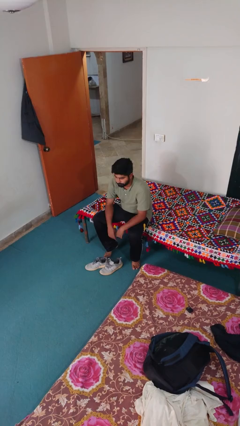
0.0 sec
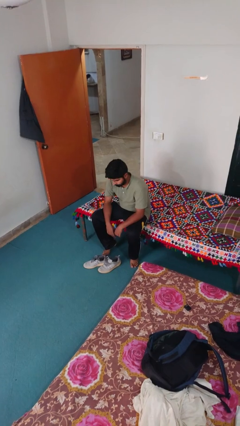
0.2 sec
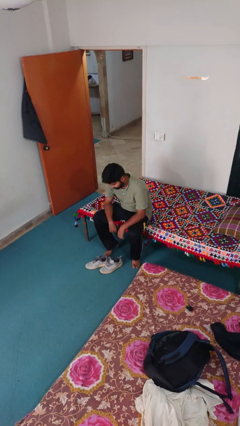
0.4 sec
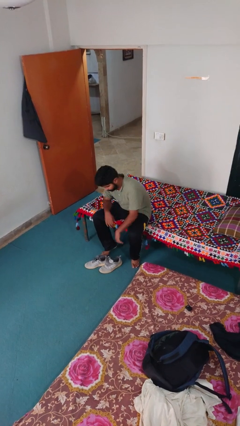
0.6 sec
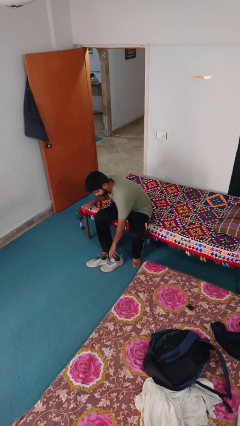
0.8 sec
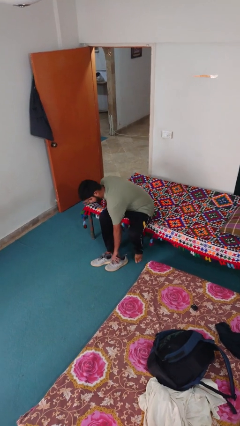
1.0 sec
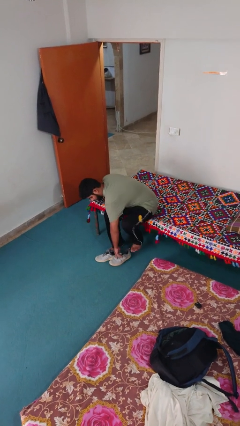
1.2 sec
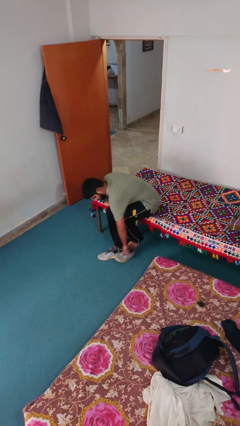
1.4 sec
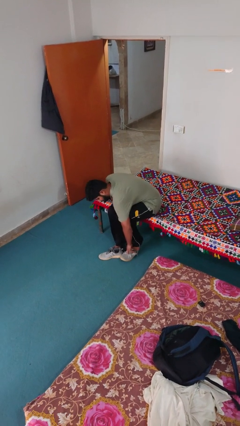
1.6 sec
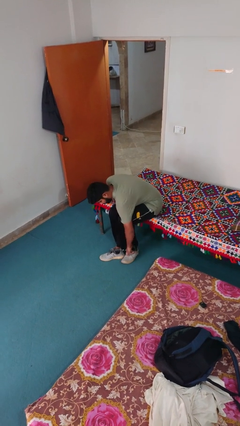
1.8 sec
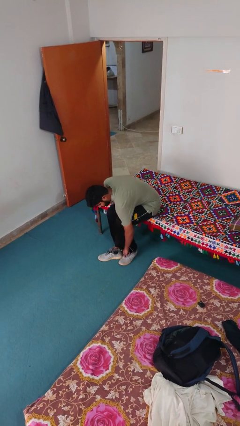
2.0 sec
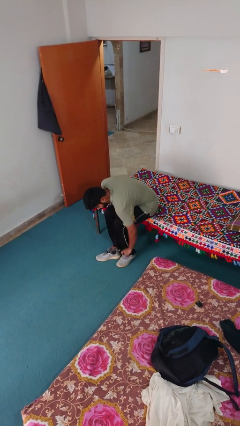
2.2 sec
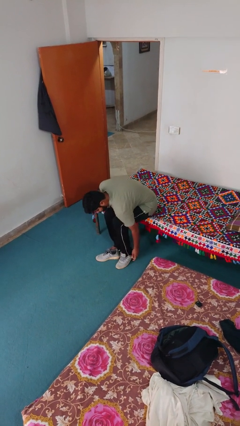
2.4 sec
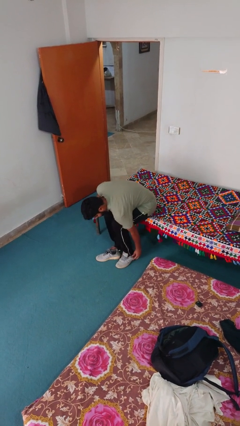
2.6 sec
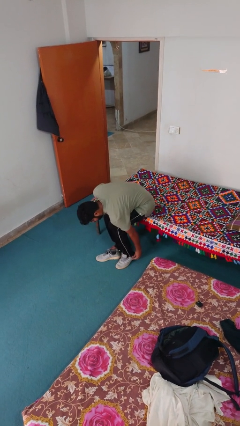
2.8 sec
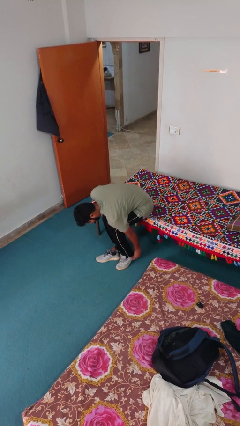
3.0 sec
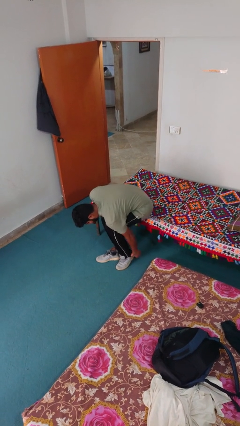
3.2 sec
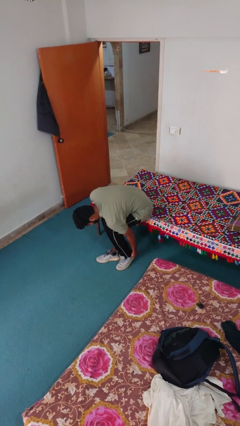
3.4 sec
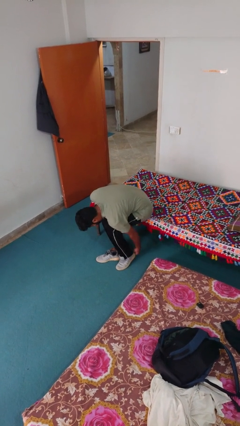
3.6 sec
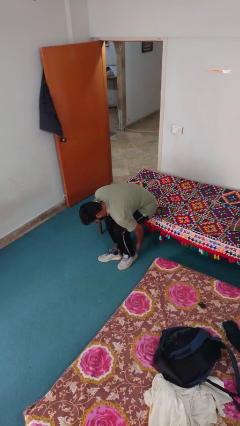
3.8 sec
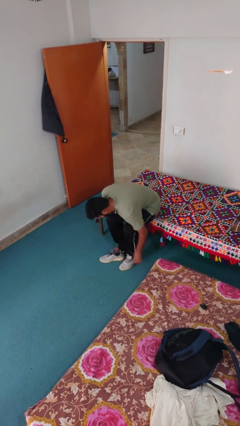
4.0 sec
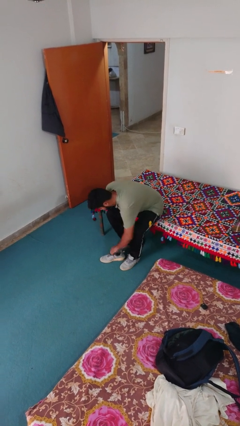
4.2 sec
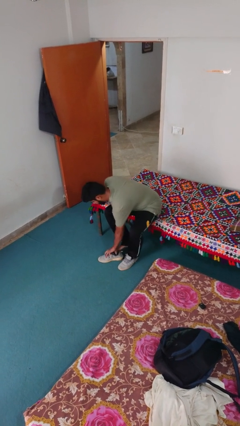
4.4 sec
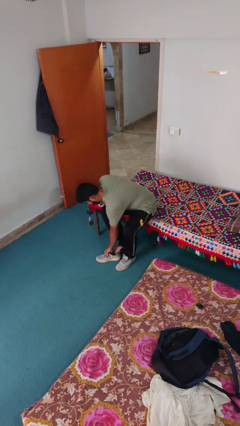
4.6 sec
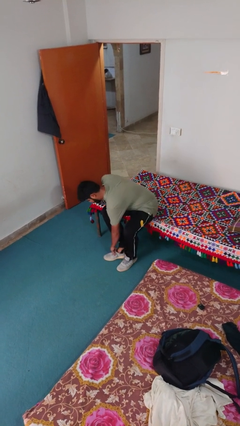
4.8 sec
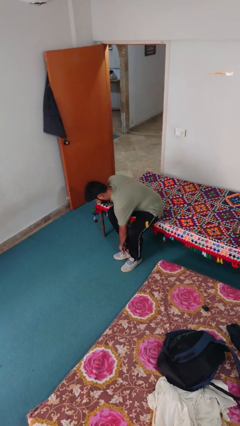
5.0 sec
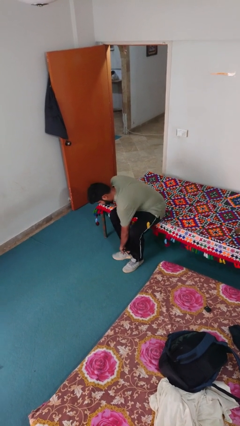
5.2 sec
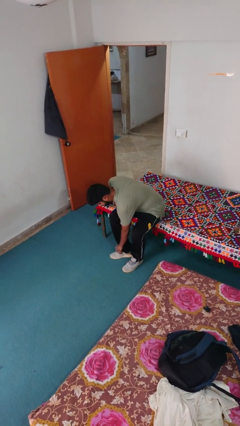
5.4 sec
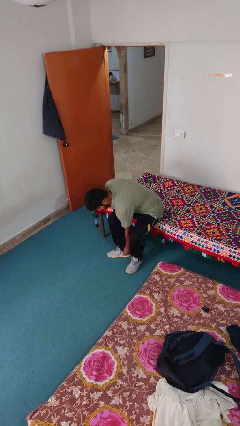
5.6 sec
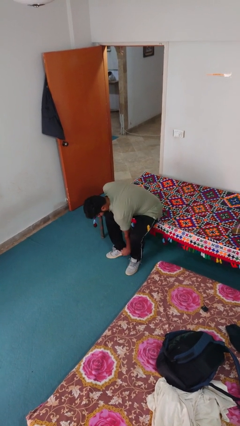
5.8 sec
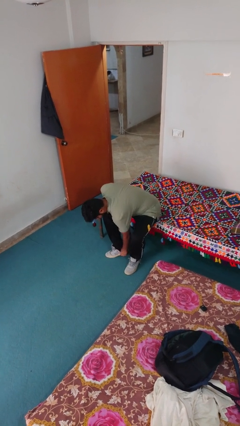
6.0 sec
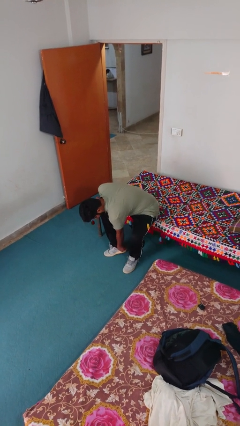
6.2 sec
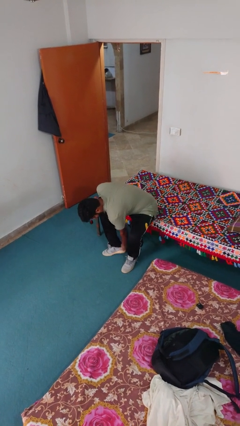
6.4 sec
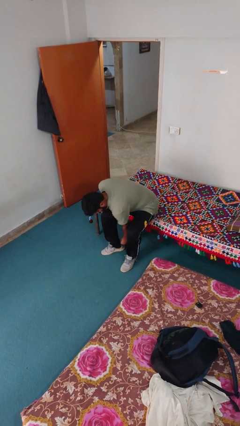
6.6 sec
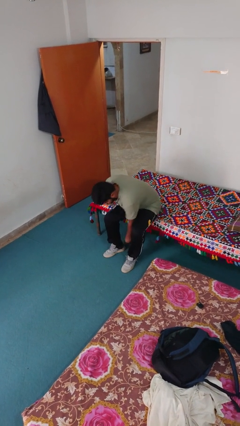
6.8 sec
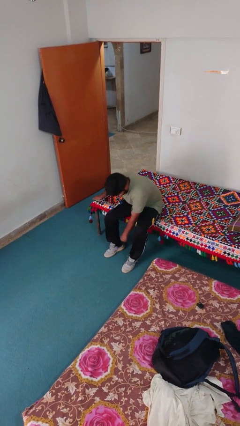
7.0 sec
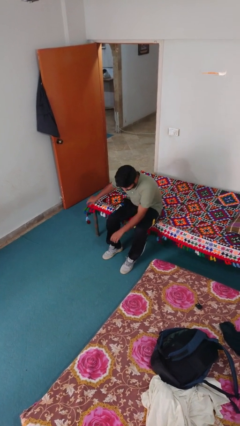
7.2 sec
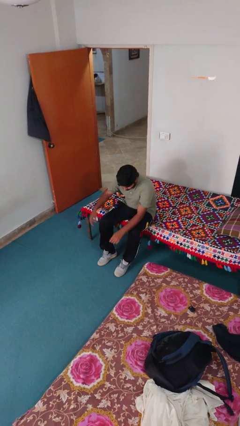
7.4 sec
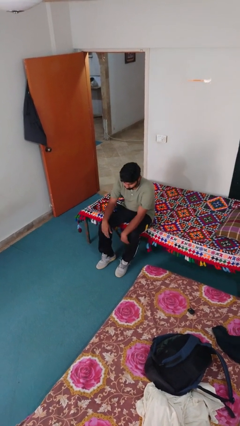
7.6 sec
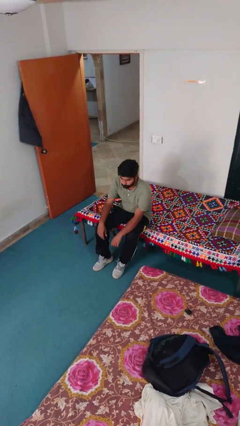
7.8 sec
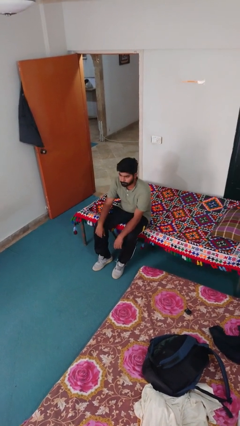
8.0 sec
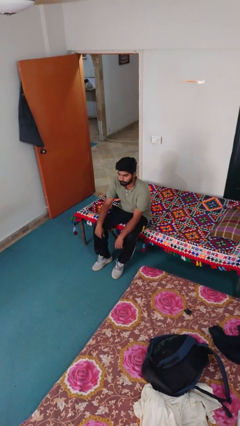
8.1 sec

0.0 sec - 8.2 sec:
person puts on shoes

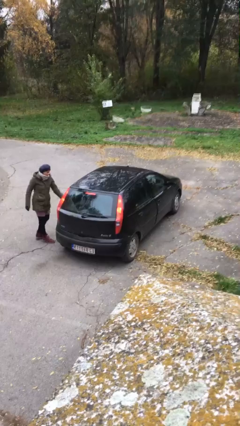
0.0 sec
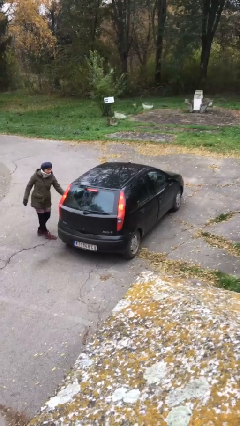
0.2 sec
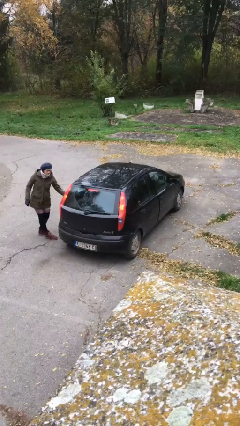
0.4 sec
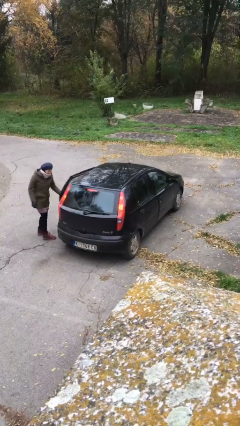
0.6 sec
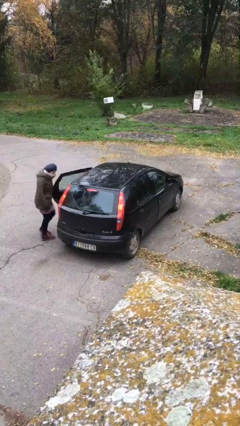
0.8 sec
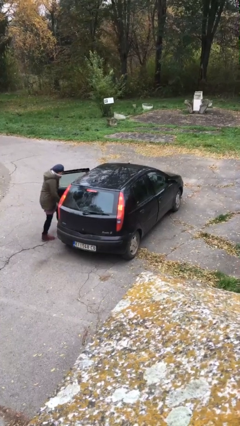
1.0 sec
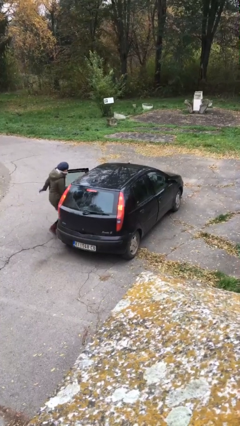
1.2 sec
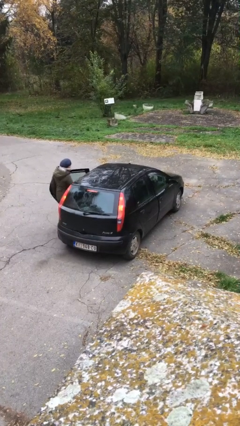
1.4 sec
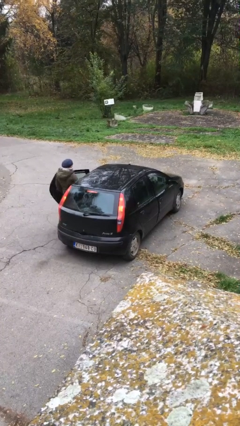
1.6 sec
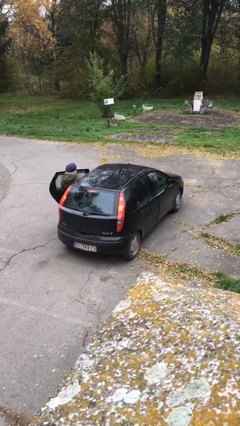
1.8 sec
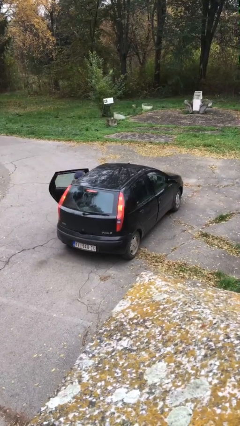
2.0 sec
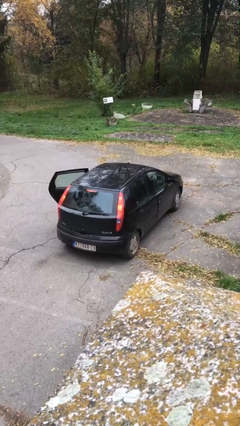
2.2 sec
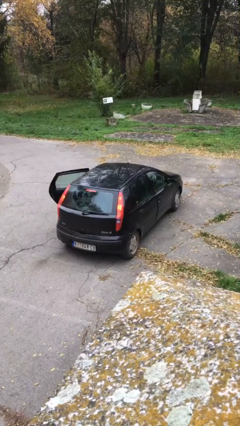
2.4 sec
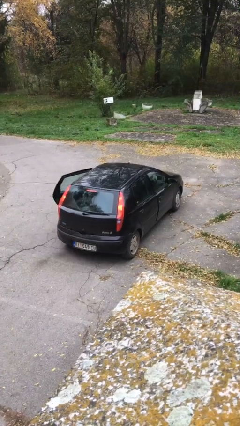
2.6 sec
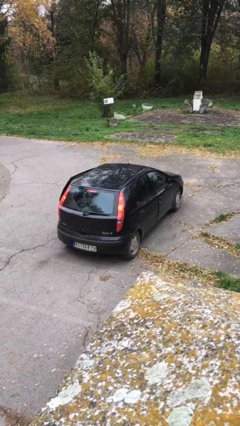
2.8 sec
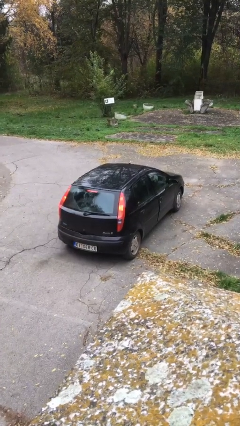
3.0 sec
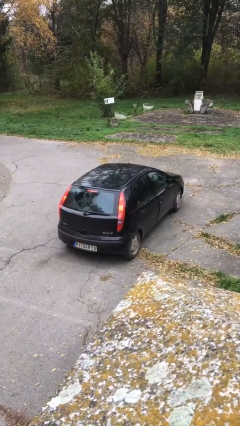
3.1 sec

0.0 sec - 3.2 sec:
car picks up person

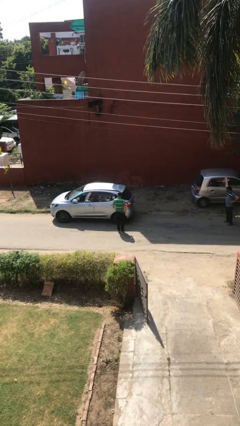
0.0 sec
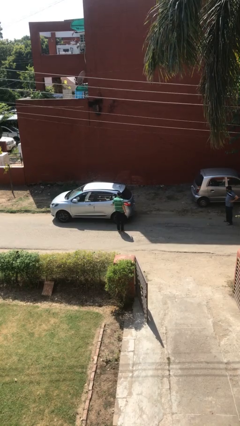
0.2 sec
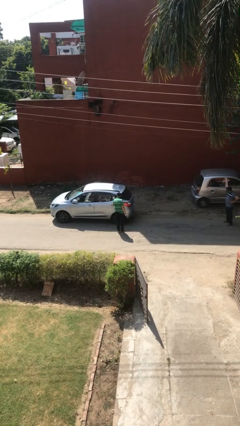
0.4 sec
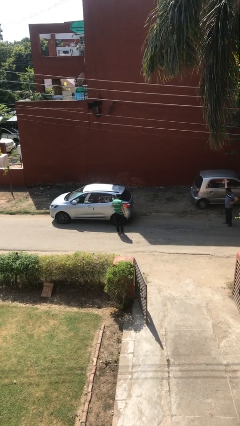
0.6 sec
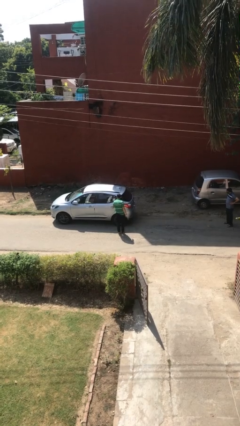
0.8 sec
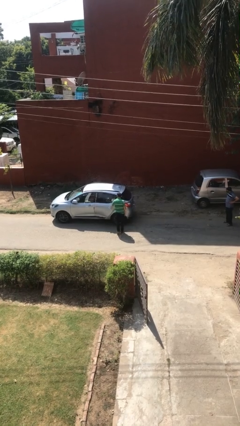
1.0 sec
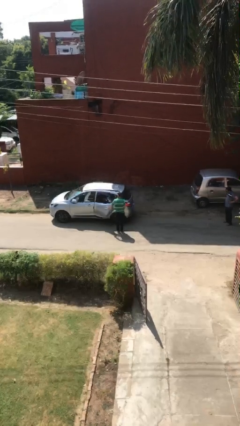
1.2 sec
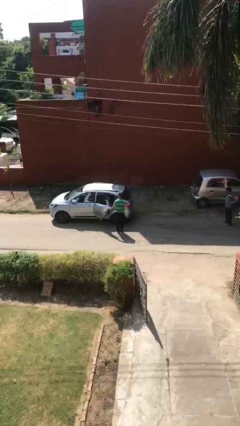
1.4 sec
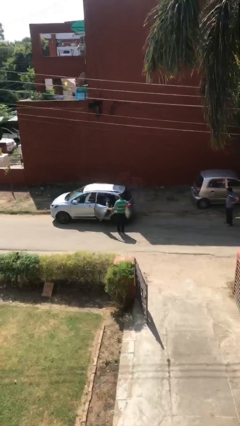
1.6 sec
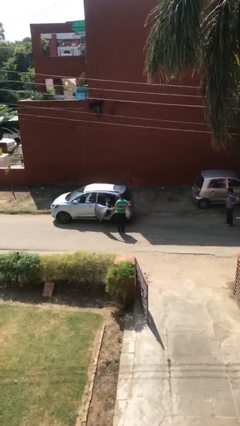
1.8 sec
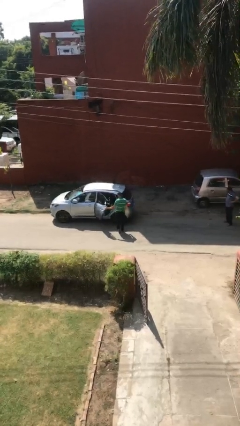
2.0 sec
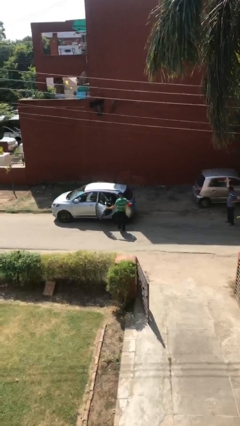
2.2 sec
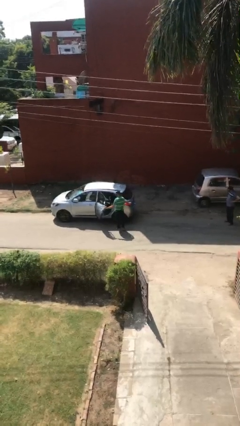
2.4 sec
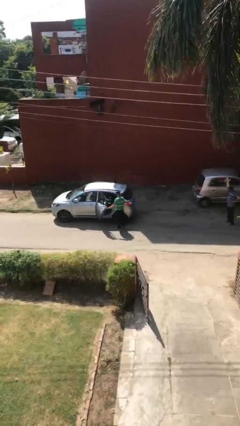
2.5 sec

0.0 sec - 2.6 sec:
person opens car door

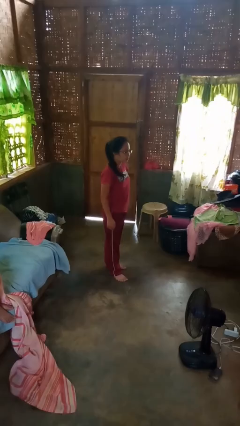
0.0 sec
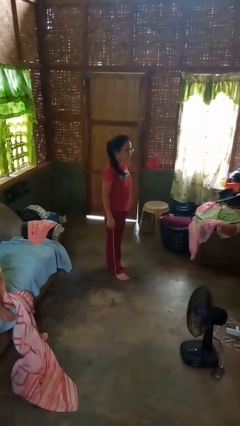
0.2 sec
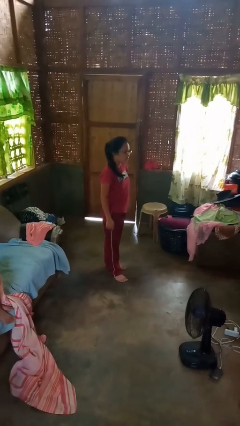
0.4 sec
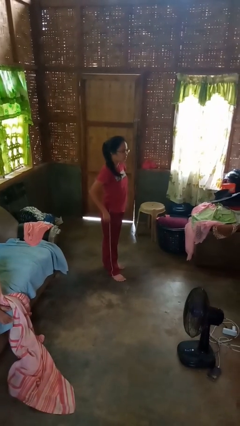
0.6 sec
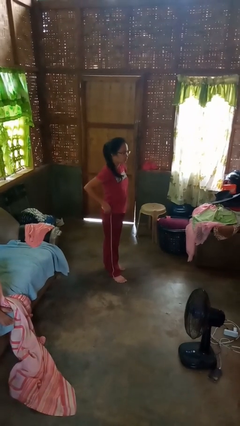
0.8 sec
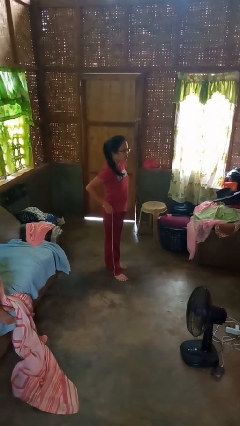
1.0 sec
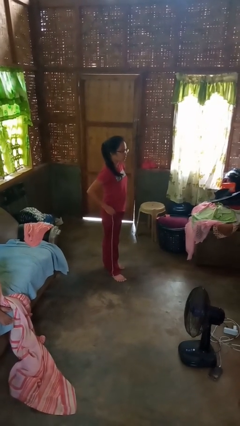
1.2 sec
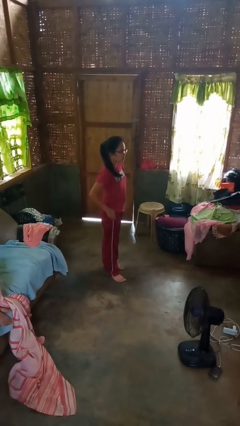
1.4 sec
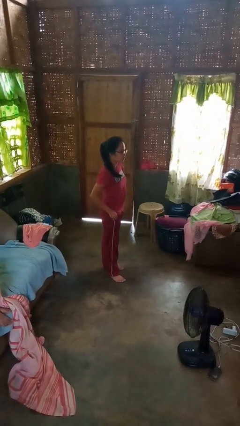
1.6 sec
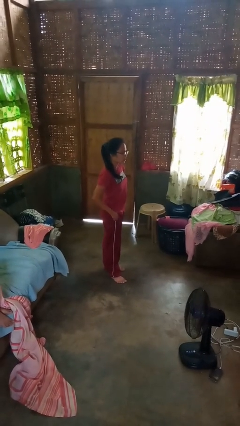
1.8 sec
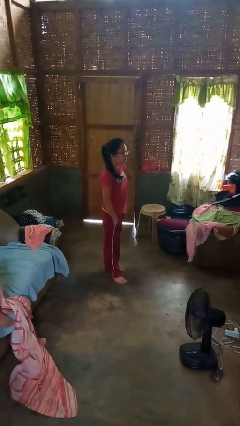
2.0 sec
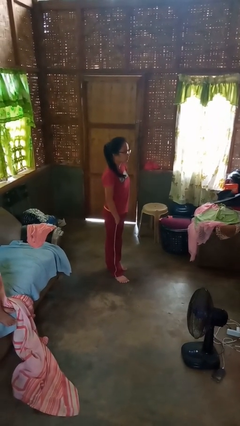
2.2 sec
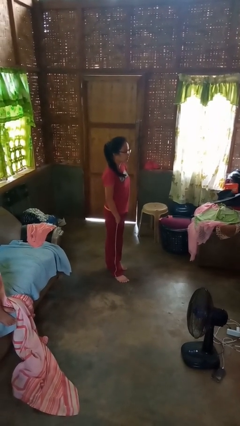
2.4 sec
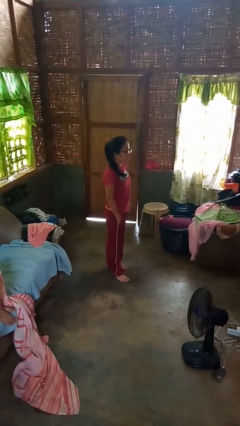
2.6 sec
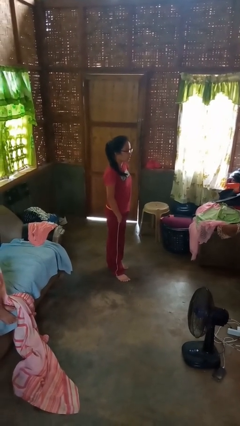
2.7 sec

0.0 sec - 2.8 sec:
person puts hands in back pockets

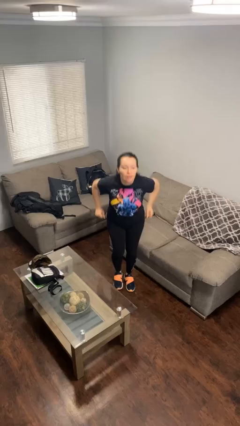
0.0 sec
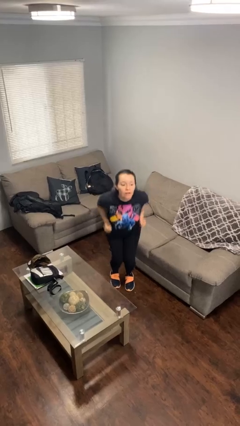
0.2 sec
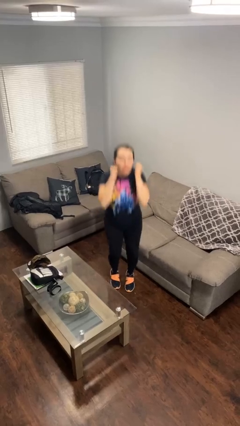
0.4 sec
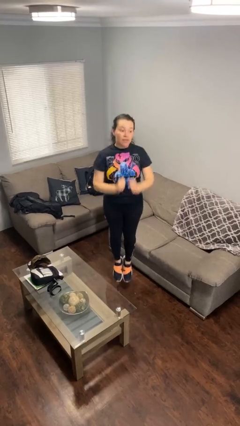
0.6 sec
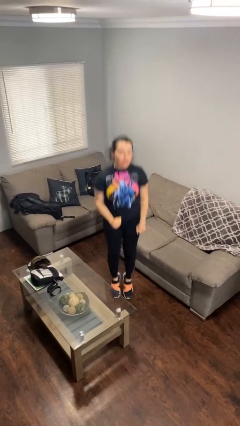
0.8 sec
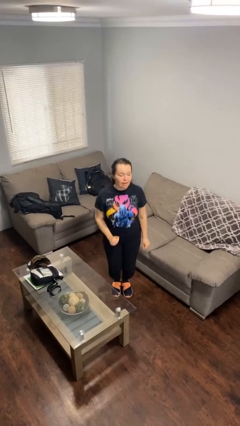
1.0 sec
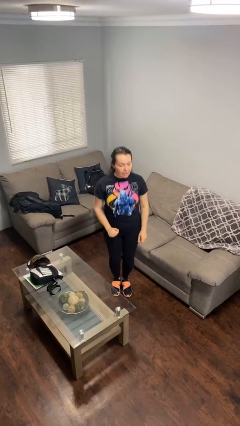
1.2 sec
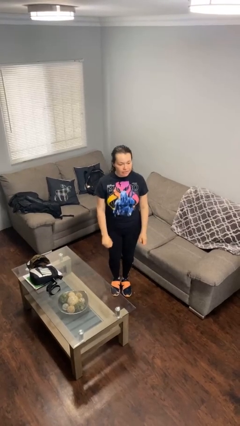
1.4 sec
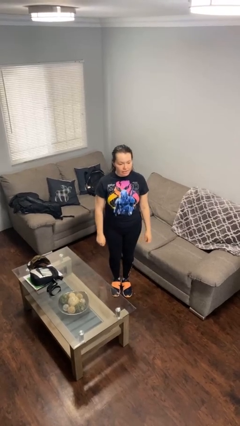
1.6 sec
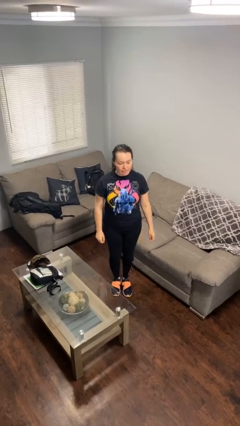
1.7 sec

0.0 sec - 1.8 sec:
person jumps
